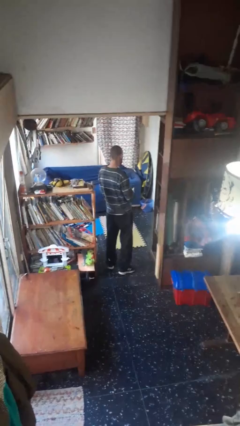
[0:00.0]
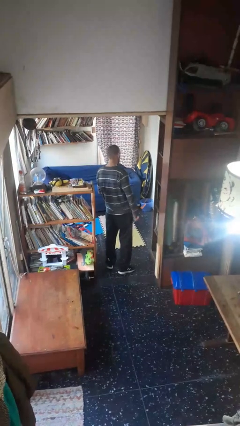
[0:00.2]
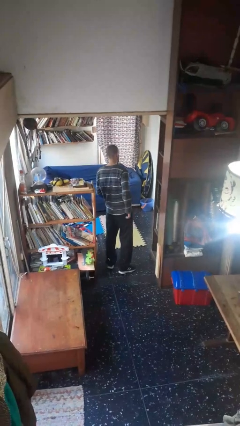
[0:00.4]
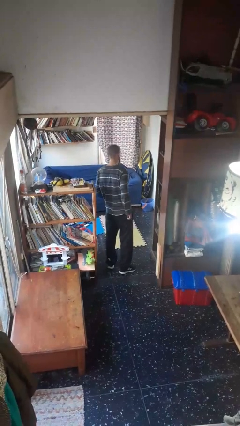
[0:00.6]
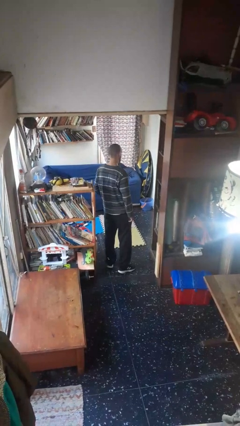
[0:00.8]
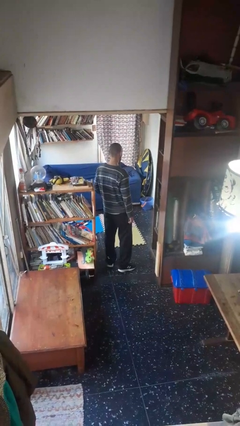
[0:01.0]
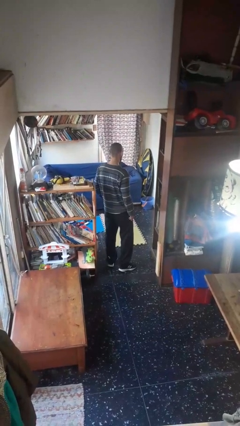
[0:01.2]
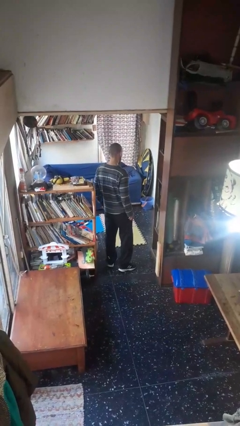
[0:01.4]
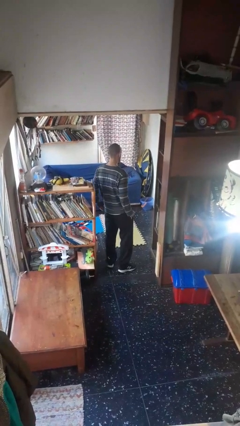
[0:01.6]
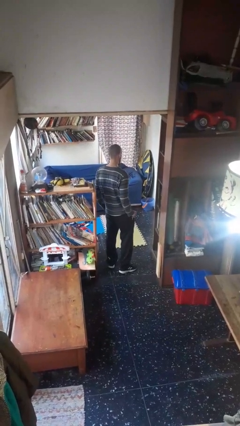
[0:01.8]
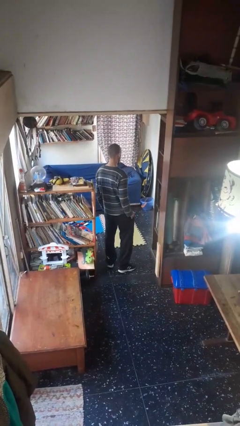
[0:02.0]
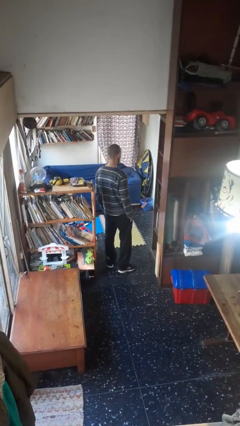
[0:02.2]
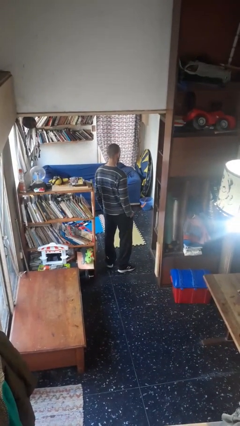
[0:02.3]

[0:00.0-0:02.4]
person puts phone into pocket

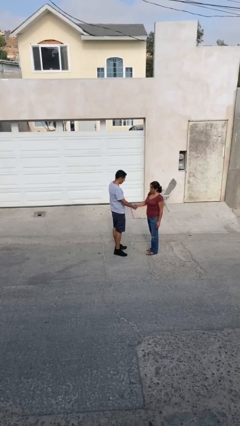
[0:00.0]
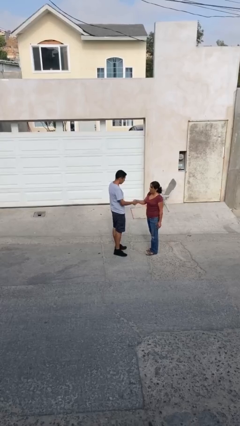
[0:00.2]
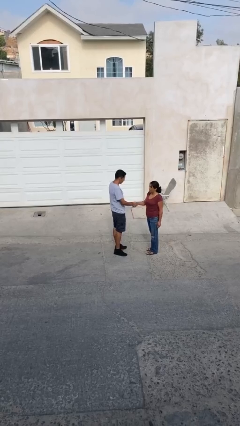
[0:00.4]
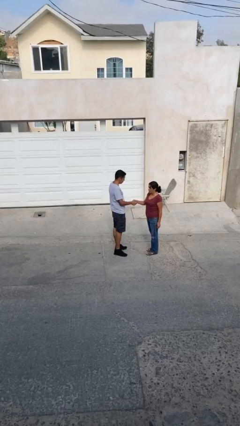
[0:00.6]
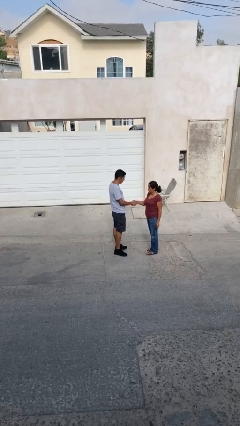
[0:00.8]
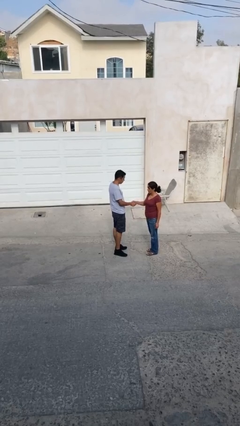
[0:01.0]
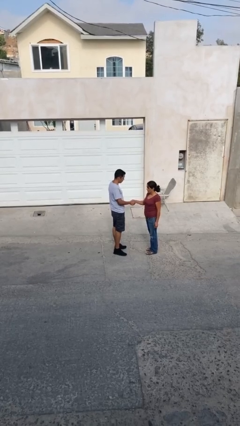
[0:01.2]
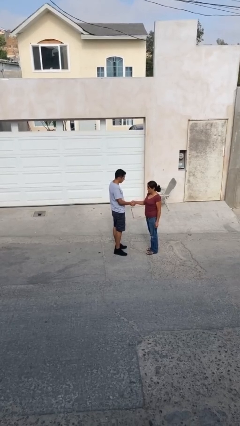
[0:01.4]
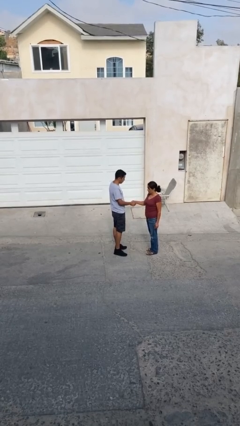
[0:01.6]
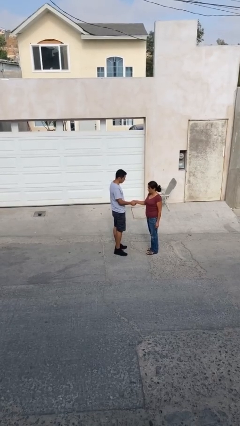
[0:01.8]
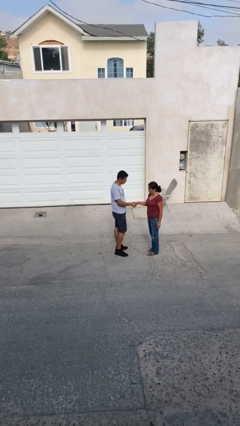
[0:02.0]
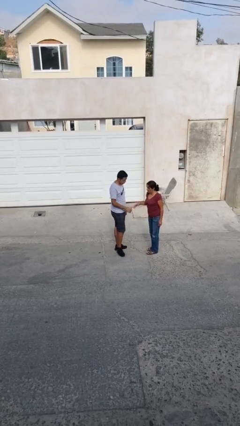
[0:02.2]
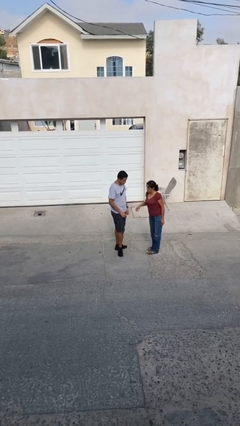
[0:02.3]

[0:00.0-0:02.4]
person shakes hand

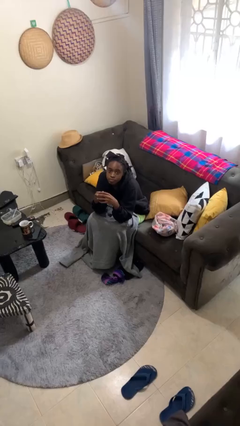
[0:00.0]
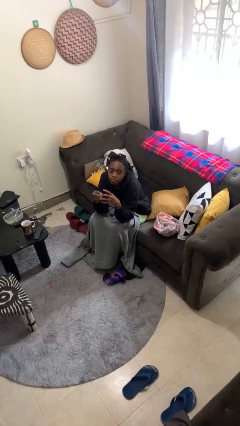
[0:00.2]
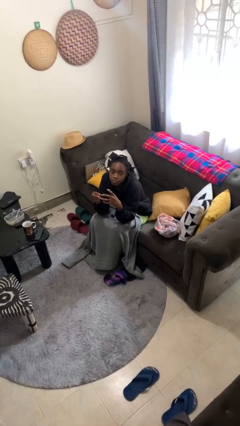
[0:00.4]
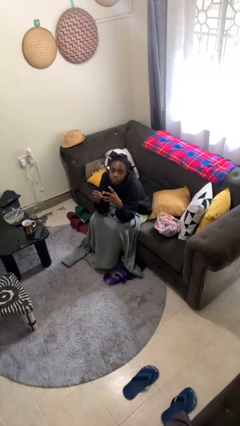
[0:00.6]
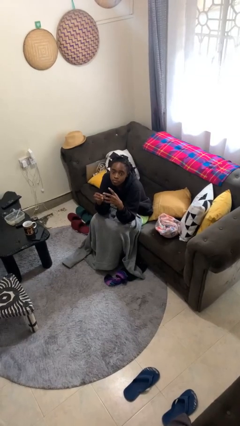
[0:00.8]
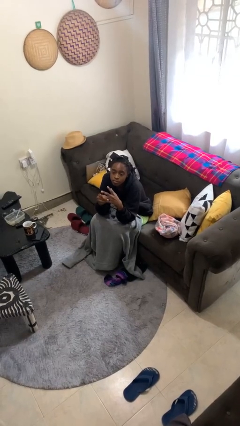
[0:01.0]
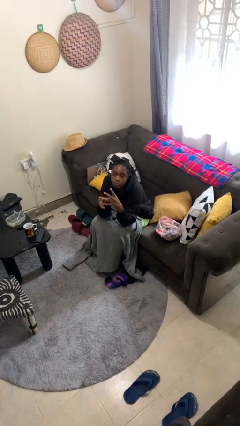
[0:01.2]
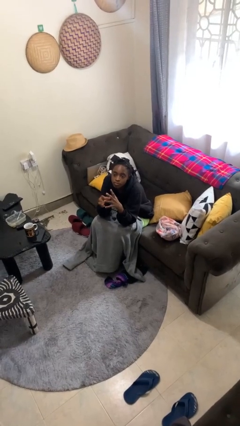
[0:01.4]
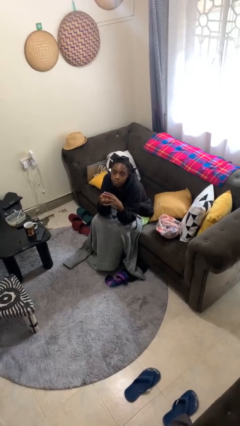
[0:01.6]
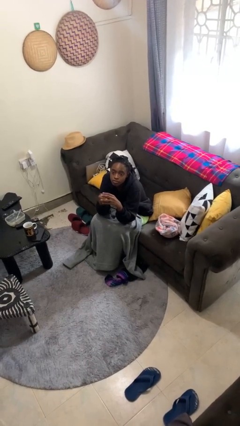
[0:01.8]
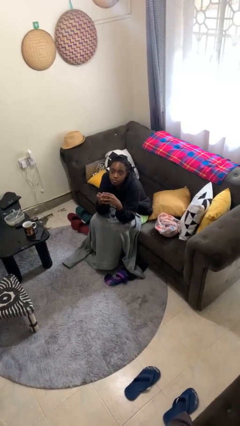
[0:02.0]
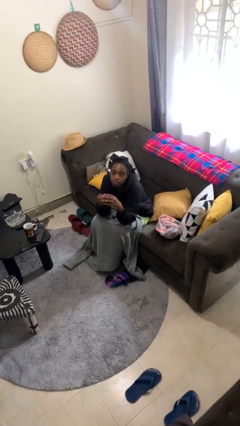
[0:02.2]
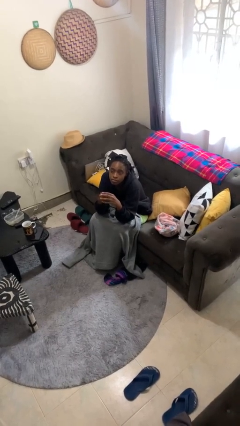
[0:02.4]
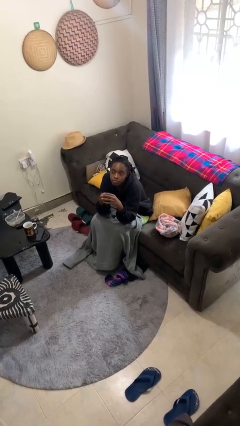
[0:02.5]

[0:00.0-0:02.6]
person puts on ring

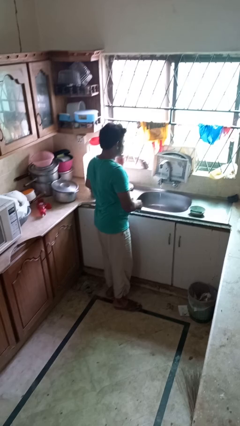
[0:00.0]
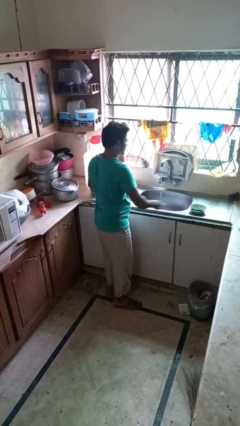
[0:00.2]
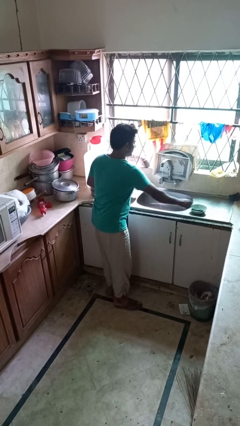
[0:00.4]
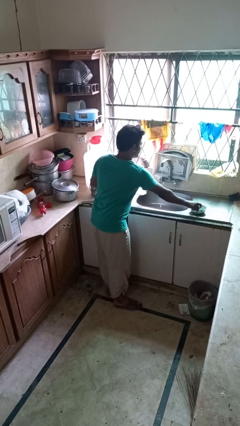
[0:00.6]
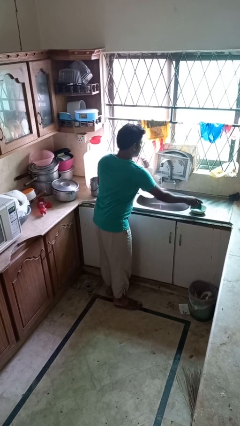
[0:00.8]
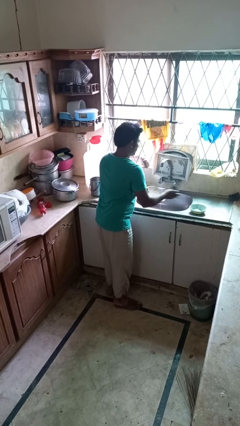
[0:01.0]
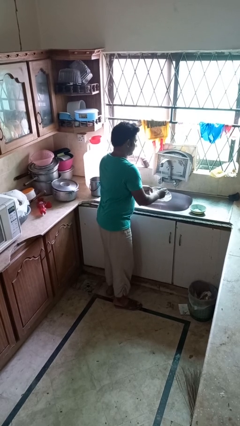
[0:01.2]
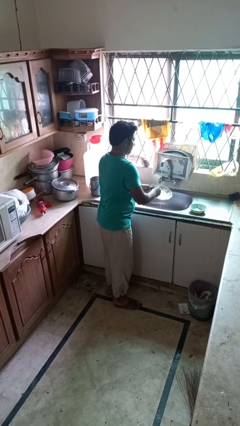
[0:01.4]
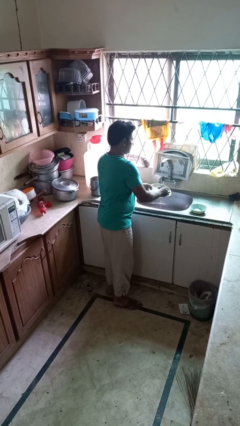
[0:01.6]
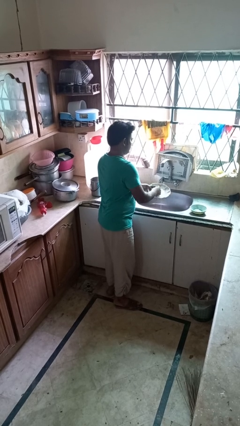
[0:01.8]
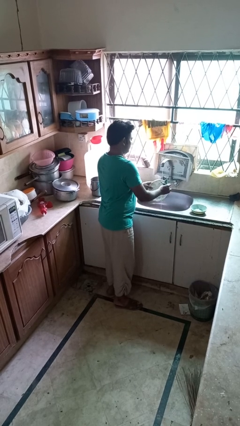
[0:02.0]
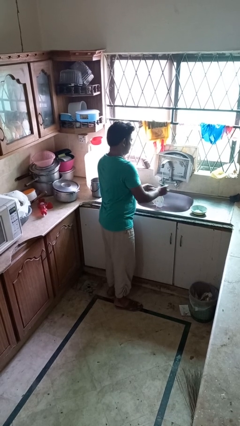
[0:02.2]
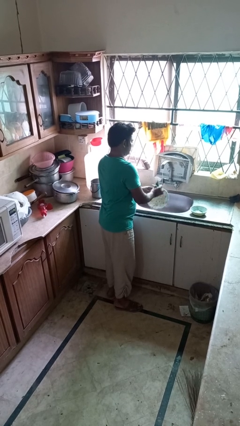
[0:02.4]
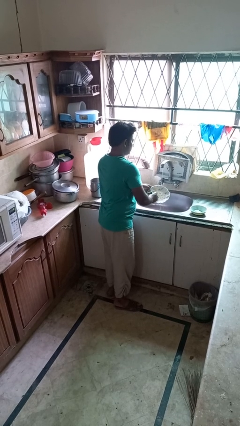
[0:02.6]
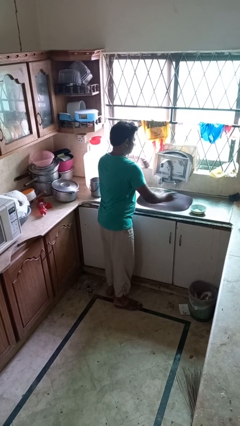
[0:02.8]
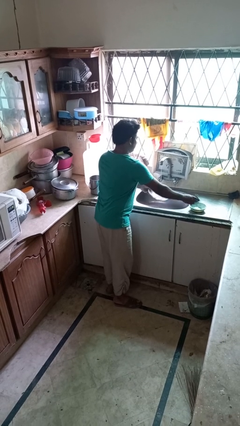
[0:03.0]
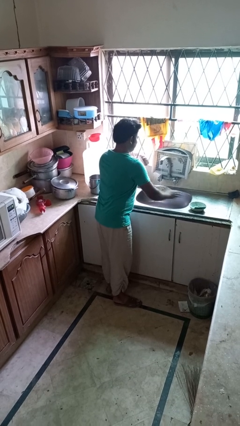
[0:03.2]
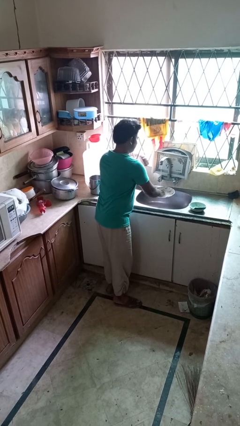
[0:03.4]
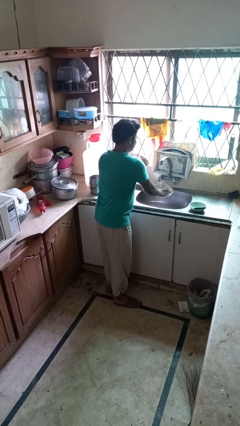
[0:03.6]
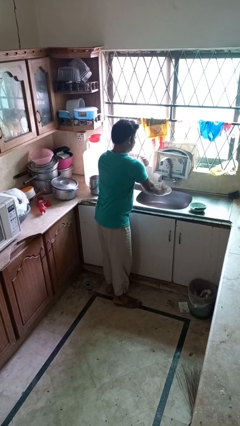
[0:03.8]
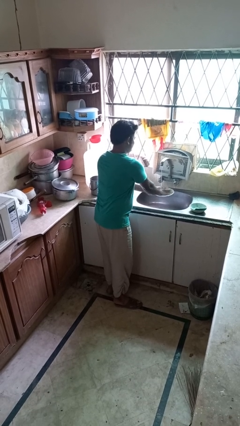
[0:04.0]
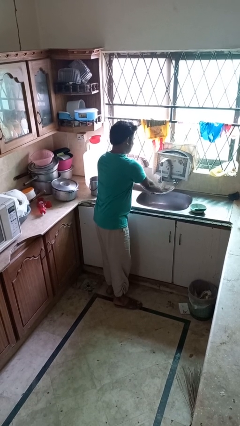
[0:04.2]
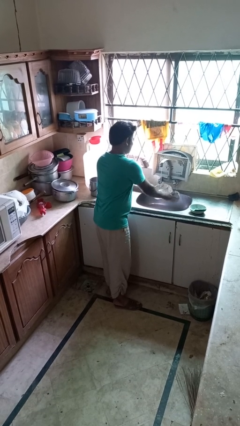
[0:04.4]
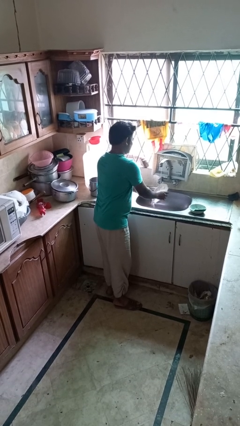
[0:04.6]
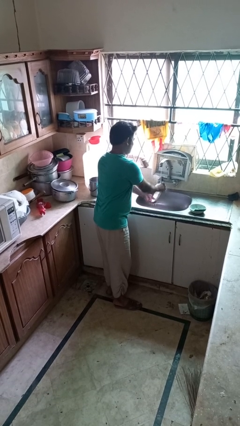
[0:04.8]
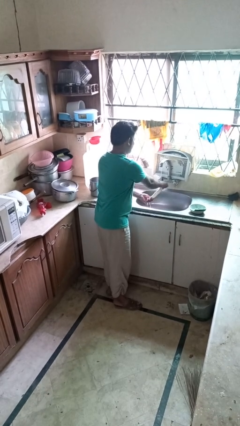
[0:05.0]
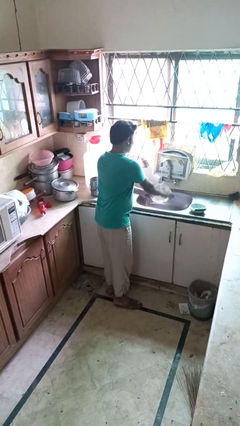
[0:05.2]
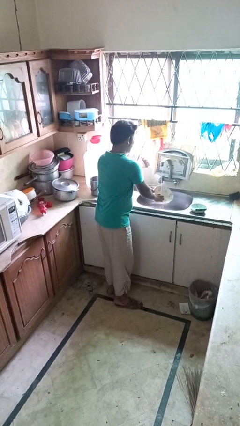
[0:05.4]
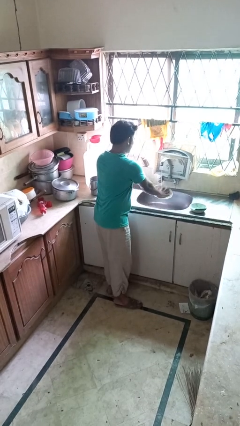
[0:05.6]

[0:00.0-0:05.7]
person washes dish

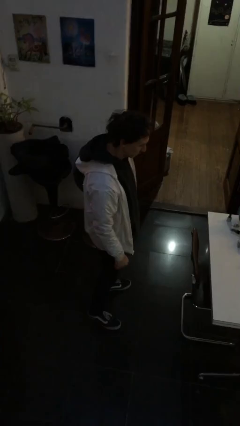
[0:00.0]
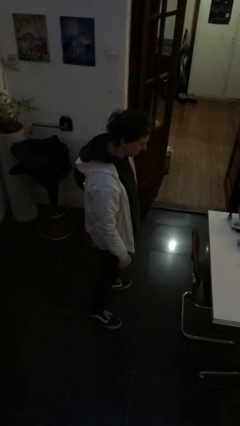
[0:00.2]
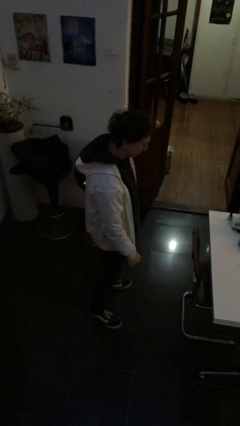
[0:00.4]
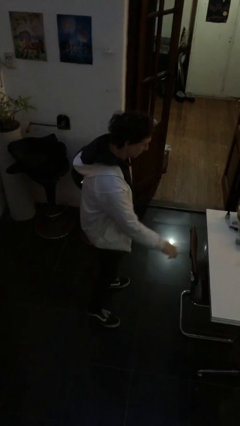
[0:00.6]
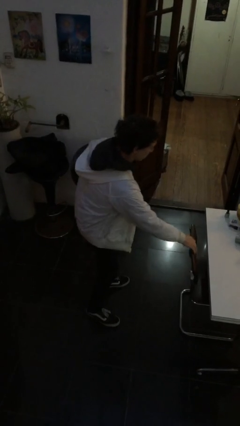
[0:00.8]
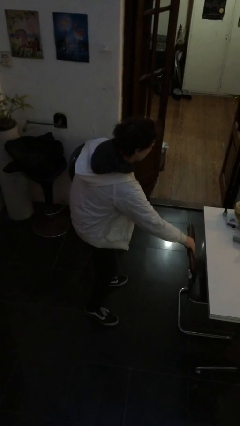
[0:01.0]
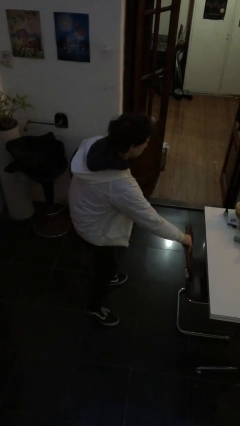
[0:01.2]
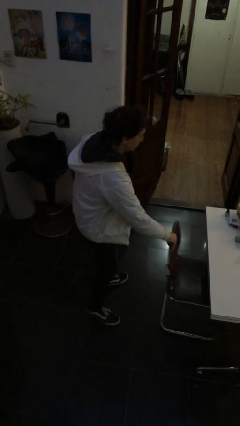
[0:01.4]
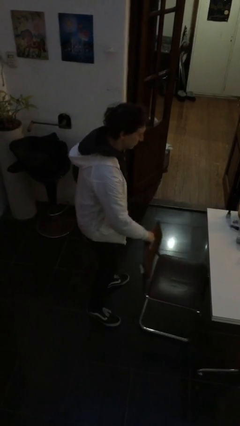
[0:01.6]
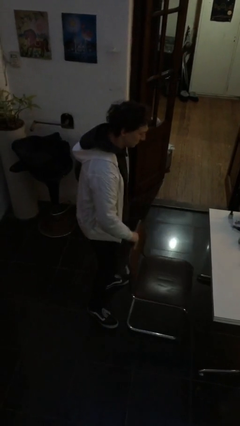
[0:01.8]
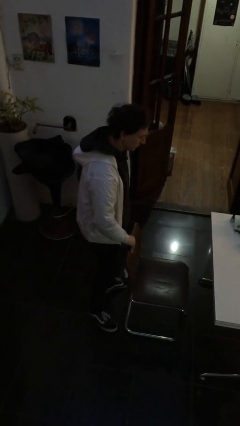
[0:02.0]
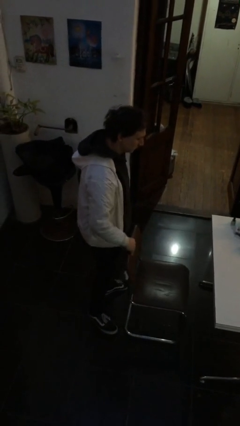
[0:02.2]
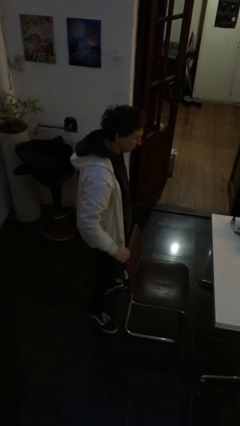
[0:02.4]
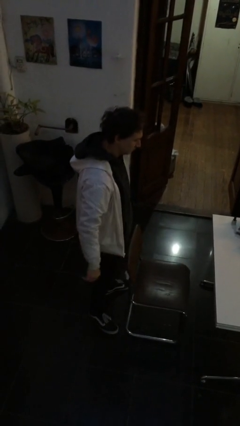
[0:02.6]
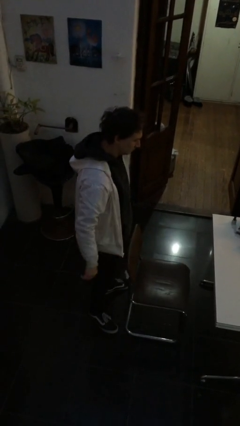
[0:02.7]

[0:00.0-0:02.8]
person pulls out chair

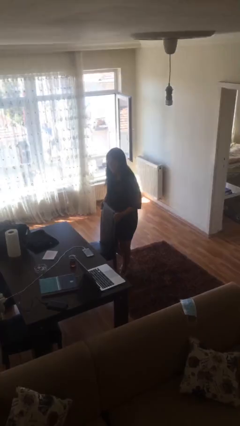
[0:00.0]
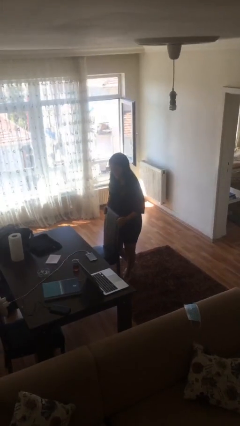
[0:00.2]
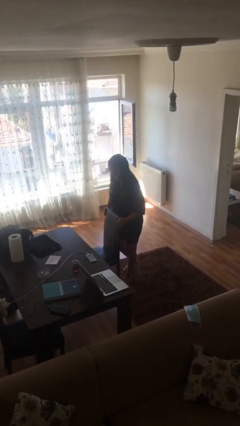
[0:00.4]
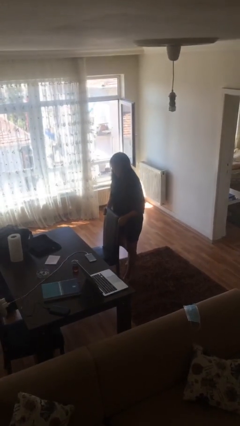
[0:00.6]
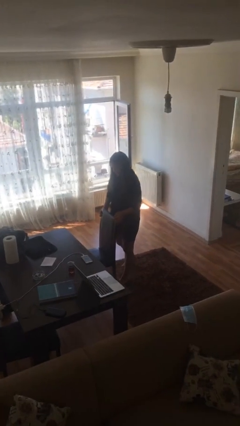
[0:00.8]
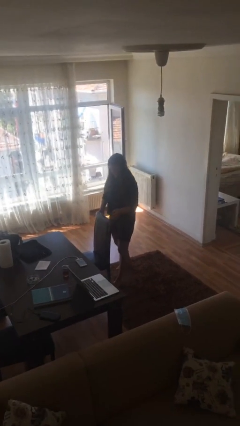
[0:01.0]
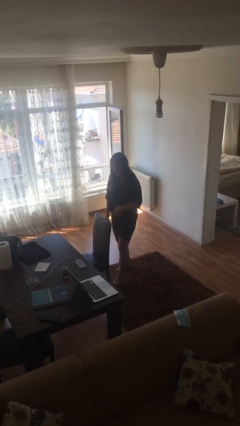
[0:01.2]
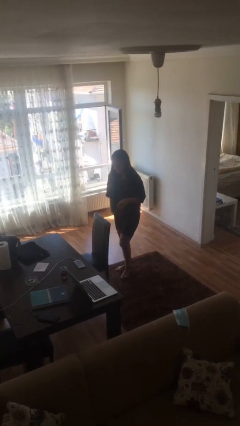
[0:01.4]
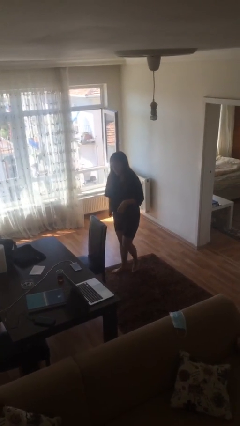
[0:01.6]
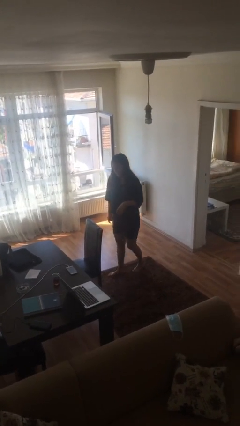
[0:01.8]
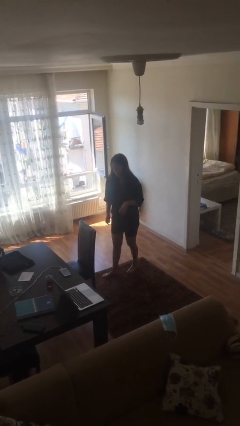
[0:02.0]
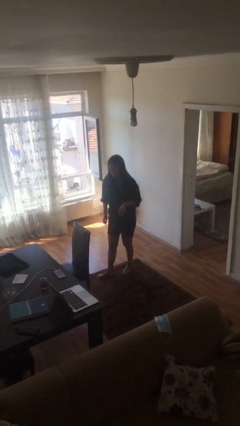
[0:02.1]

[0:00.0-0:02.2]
person puts down object on floor
